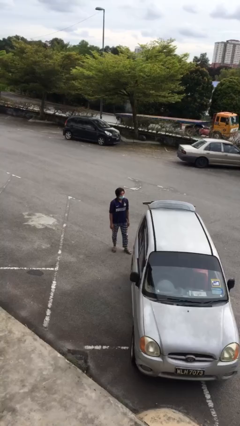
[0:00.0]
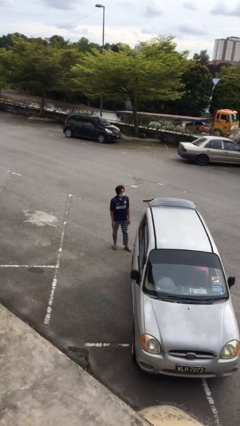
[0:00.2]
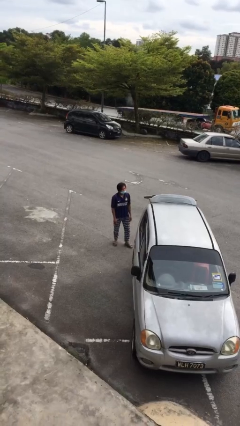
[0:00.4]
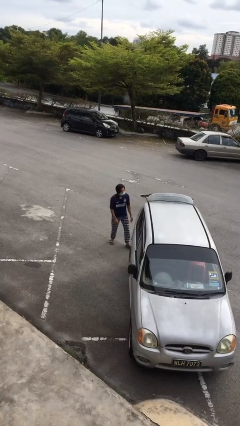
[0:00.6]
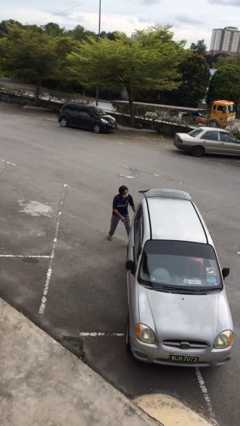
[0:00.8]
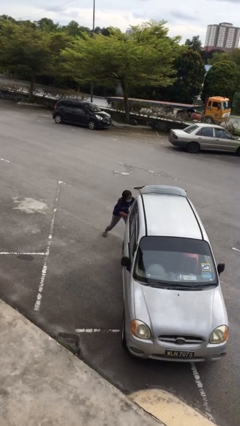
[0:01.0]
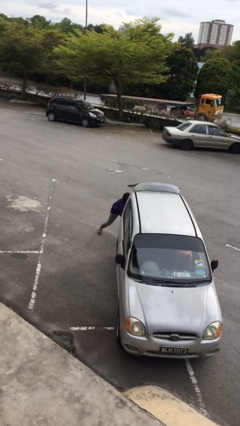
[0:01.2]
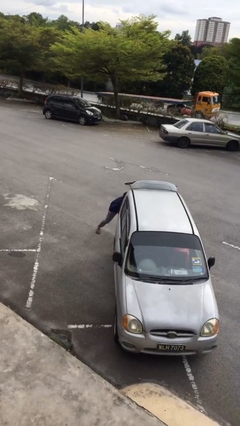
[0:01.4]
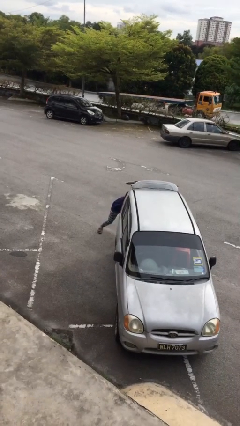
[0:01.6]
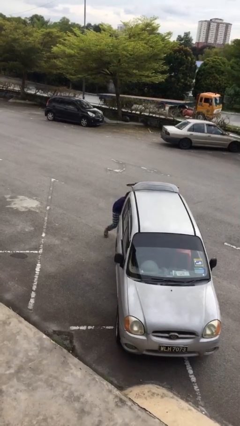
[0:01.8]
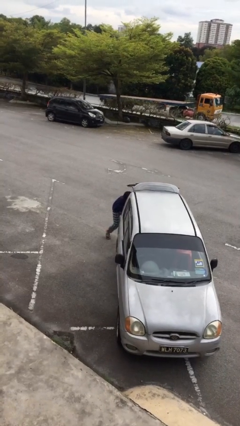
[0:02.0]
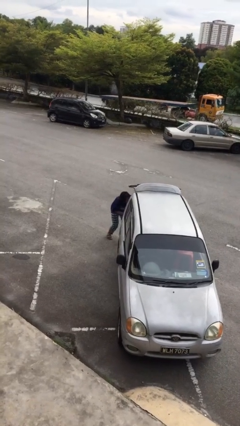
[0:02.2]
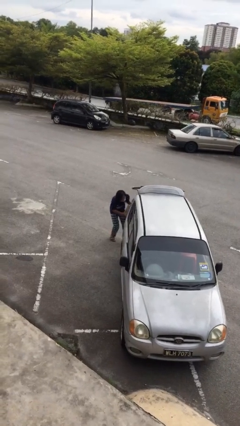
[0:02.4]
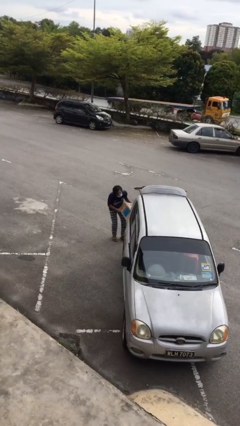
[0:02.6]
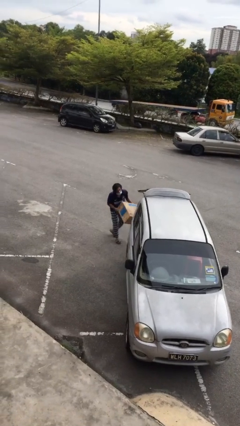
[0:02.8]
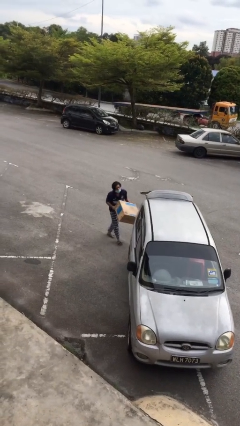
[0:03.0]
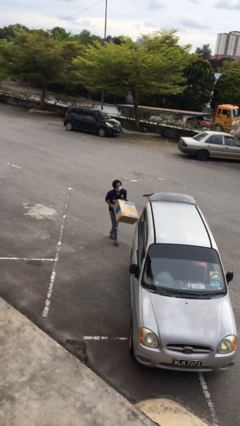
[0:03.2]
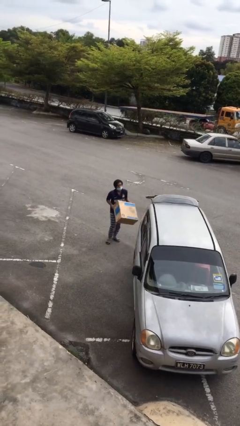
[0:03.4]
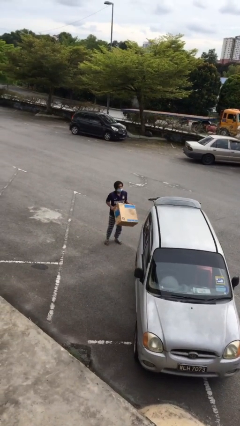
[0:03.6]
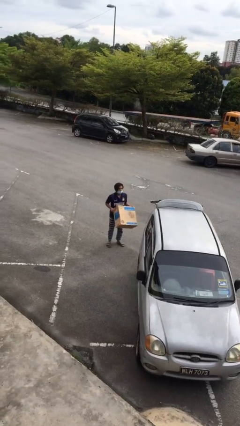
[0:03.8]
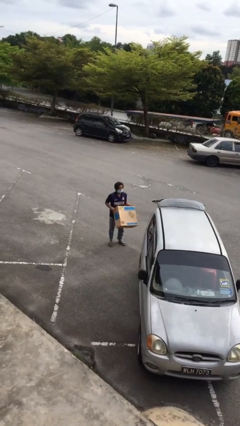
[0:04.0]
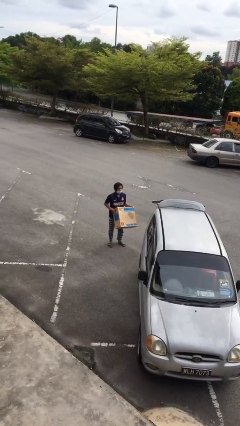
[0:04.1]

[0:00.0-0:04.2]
person unloads car

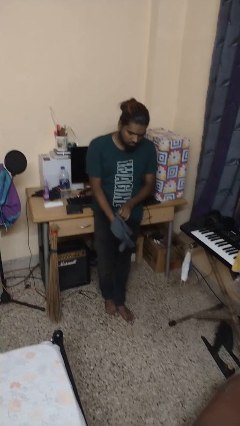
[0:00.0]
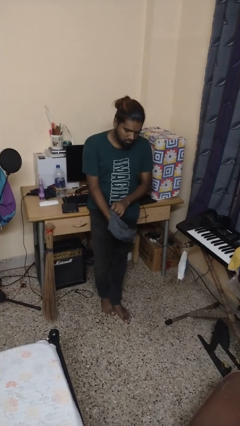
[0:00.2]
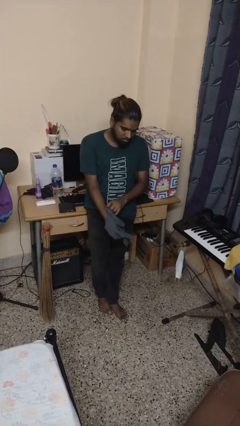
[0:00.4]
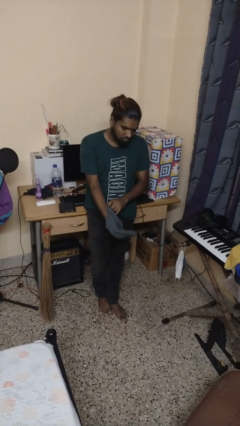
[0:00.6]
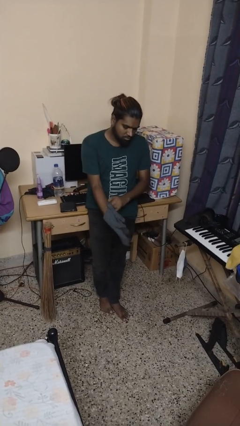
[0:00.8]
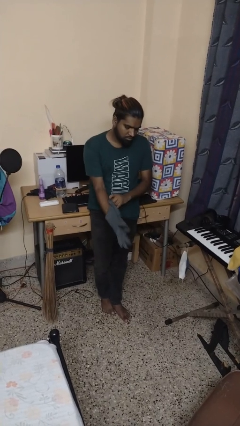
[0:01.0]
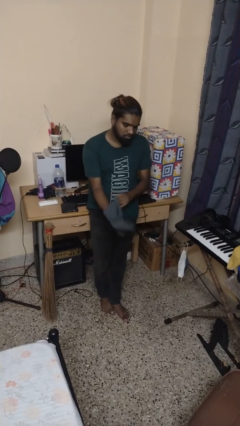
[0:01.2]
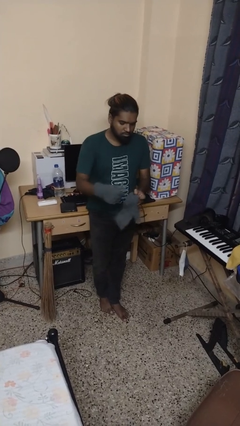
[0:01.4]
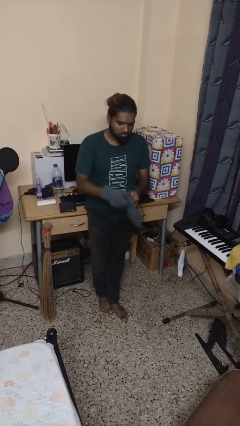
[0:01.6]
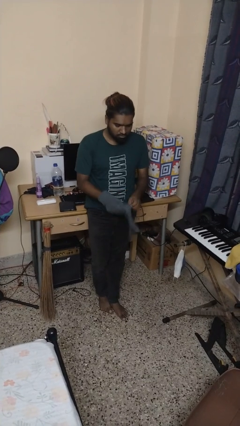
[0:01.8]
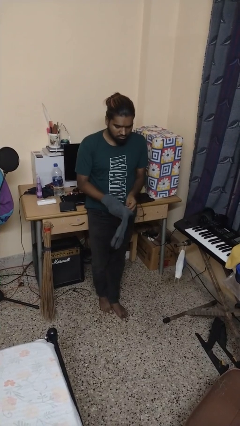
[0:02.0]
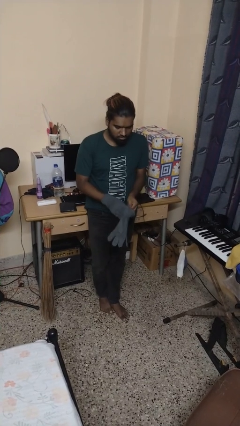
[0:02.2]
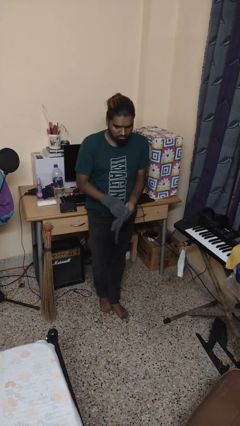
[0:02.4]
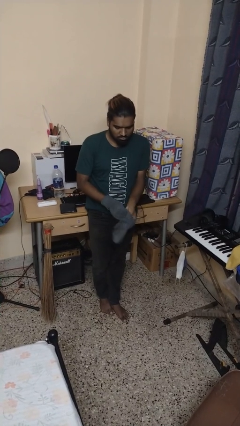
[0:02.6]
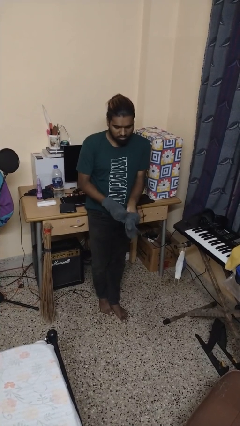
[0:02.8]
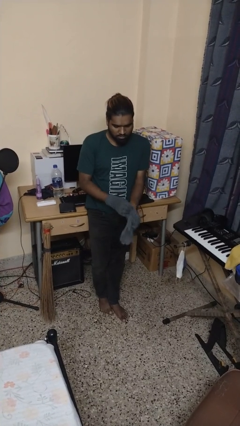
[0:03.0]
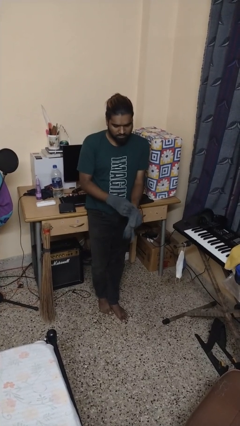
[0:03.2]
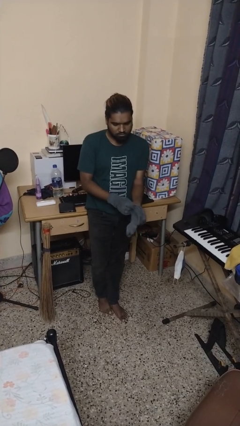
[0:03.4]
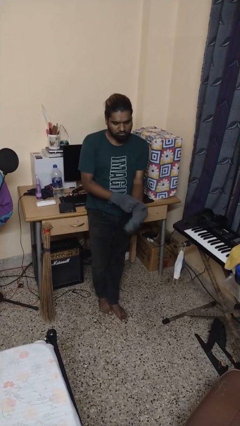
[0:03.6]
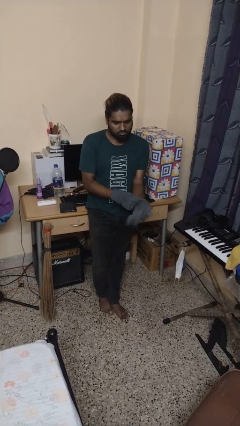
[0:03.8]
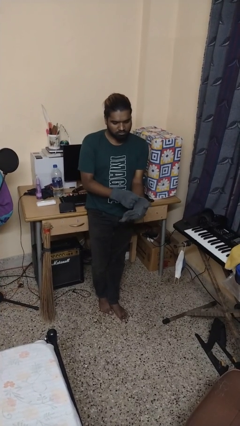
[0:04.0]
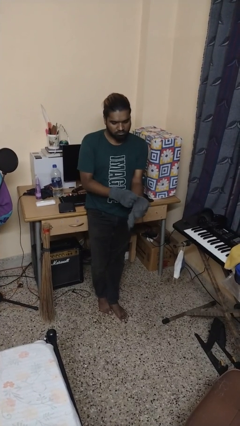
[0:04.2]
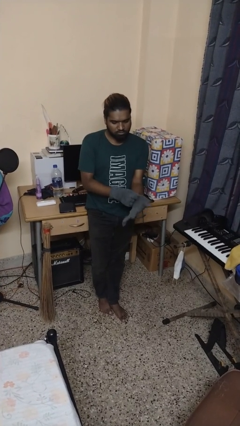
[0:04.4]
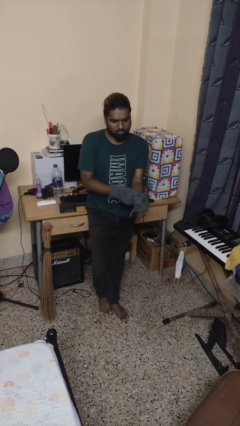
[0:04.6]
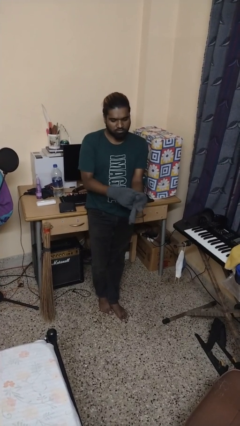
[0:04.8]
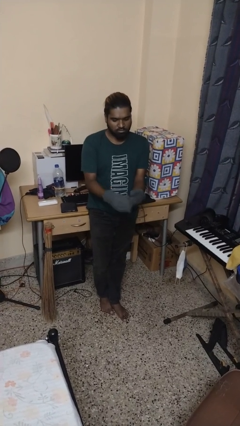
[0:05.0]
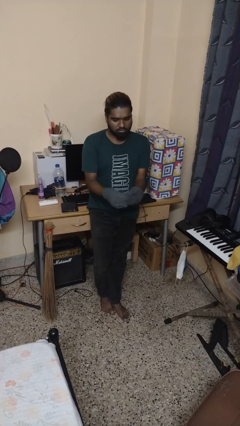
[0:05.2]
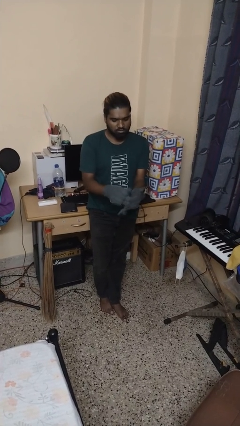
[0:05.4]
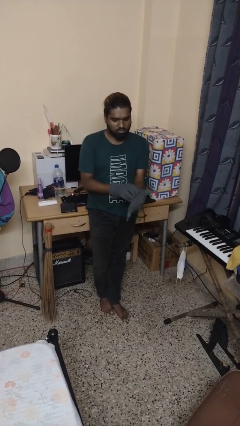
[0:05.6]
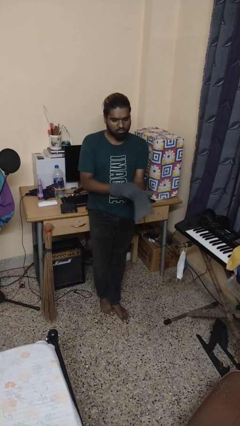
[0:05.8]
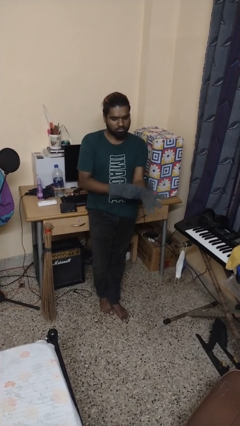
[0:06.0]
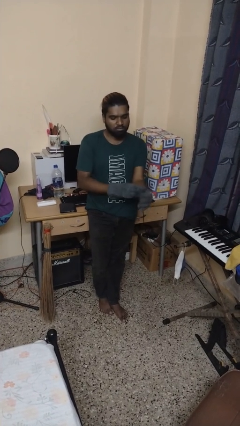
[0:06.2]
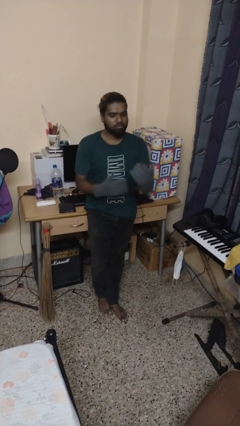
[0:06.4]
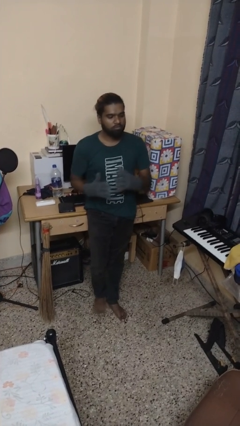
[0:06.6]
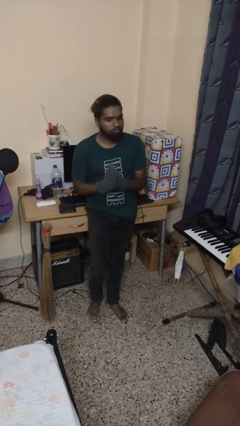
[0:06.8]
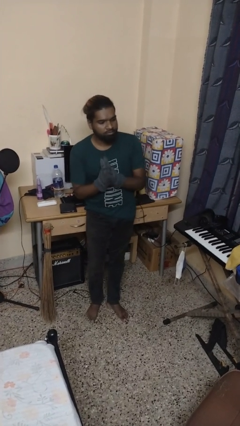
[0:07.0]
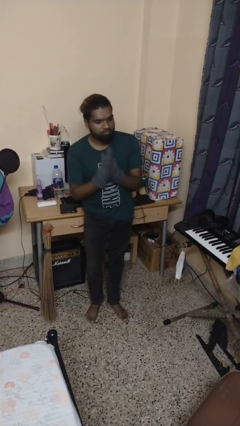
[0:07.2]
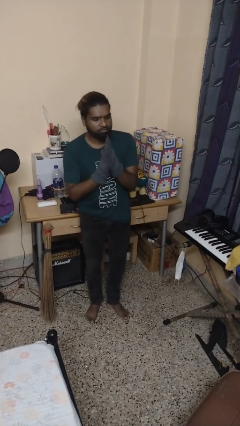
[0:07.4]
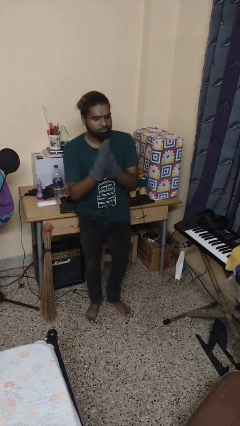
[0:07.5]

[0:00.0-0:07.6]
person puts on gloves

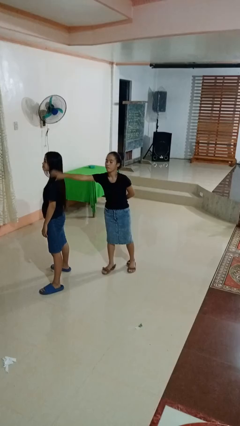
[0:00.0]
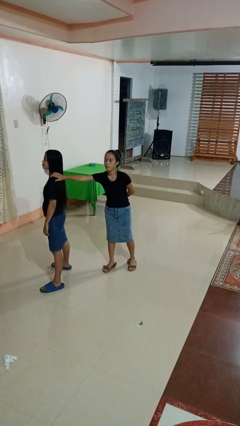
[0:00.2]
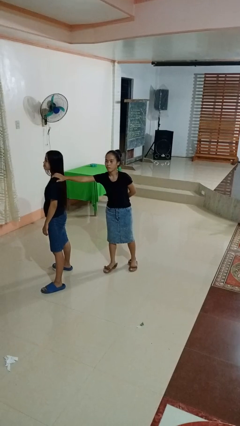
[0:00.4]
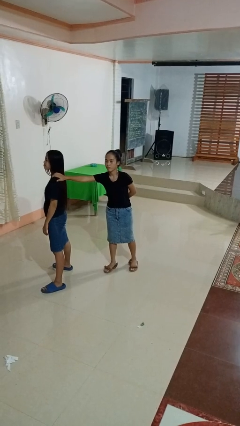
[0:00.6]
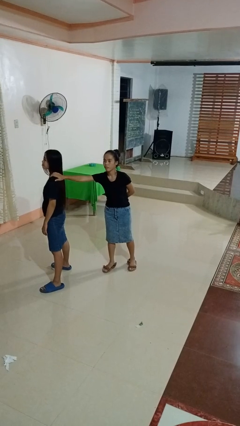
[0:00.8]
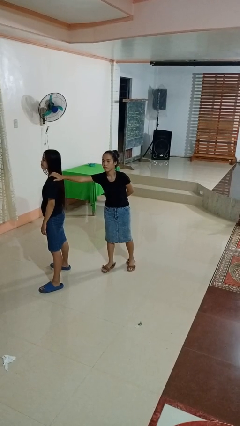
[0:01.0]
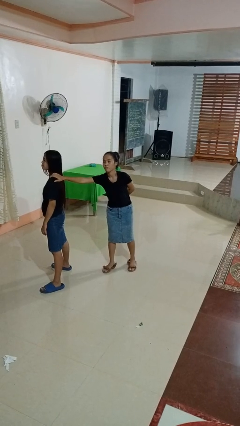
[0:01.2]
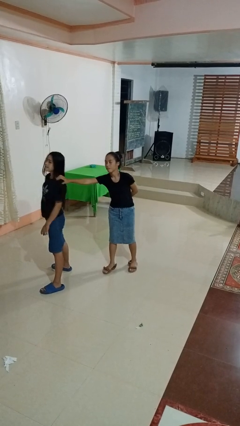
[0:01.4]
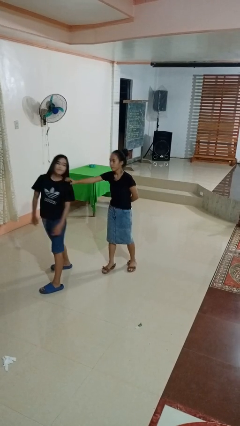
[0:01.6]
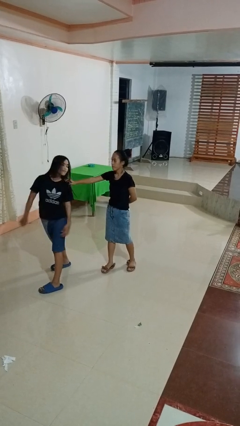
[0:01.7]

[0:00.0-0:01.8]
person grabs person by shoulder

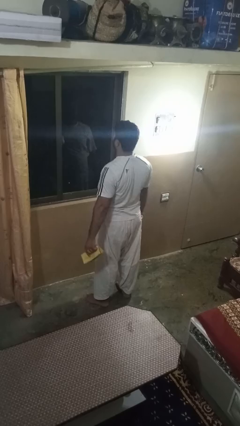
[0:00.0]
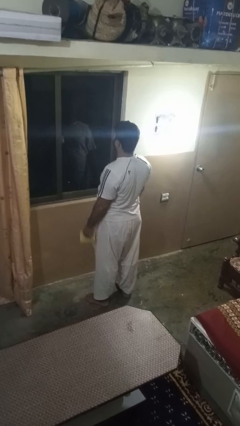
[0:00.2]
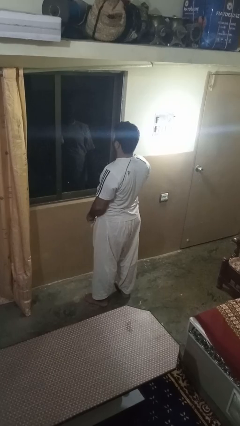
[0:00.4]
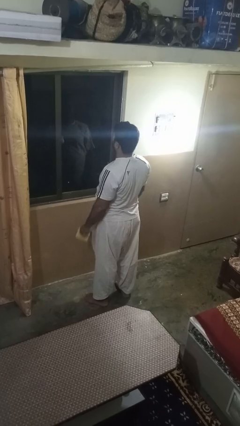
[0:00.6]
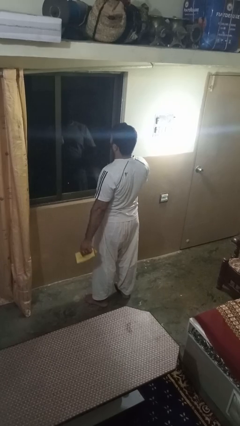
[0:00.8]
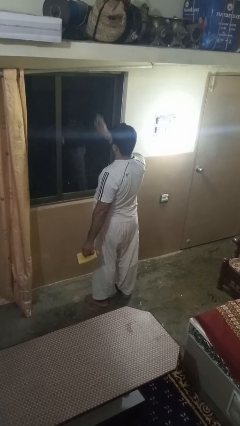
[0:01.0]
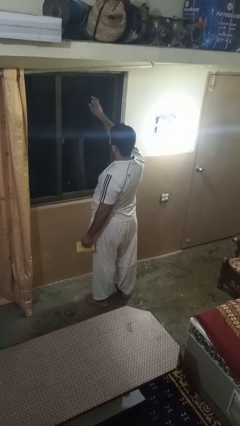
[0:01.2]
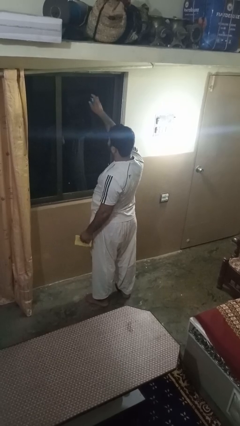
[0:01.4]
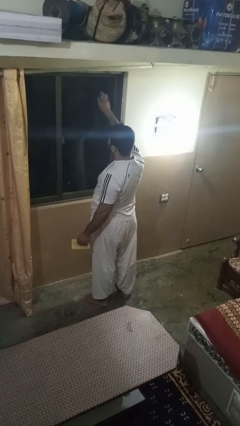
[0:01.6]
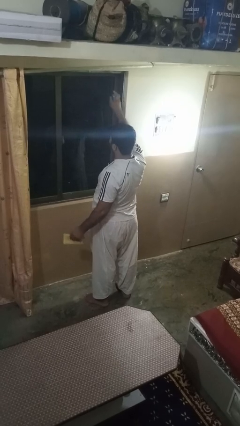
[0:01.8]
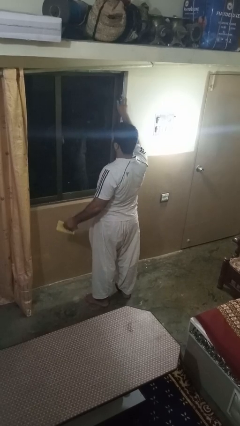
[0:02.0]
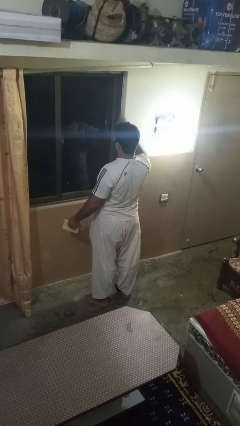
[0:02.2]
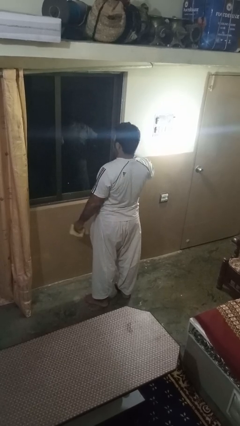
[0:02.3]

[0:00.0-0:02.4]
person sprays from bottle

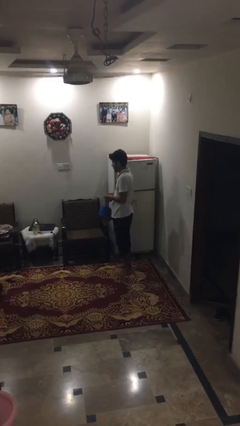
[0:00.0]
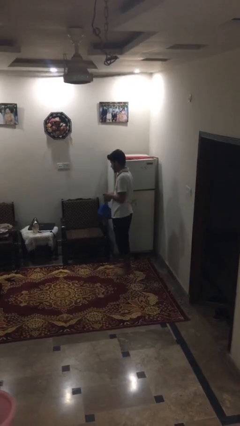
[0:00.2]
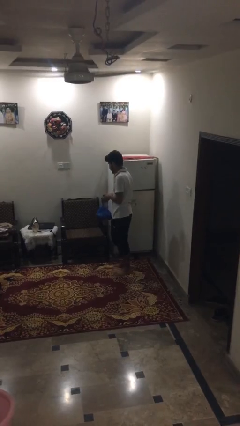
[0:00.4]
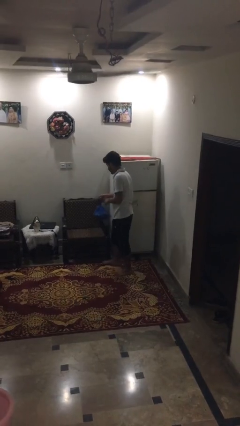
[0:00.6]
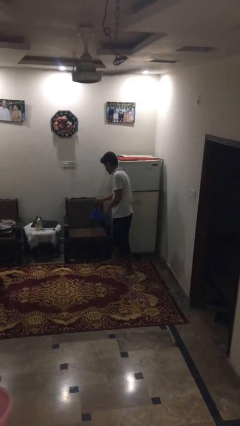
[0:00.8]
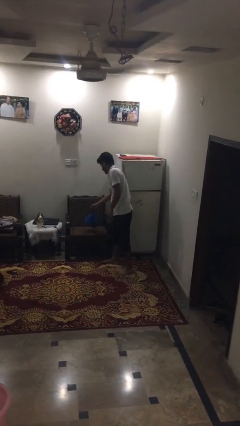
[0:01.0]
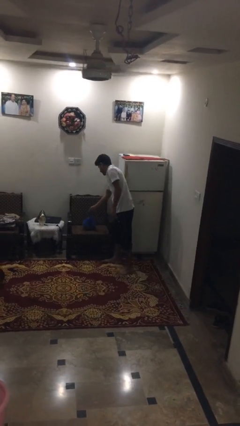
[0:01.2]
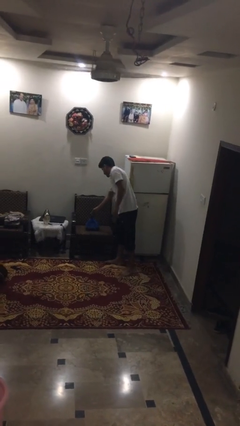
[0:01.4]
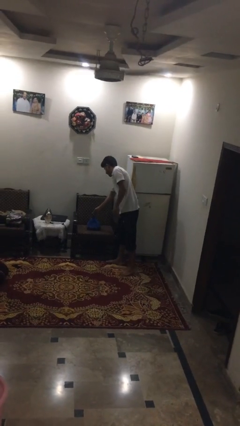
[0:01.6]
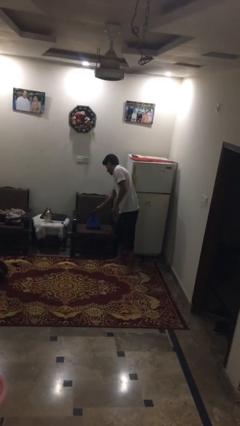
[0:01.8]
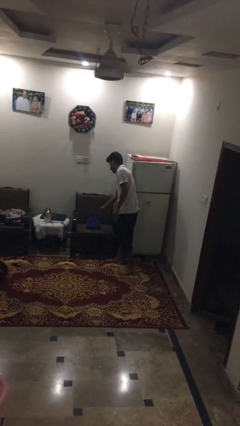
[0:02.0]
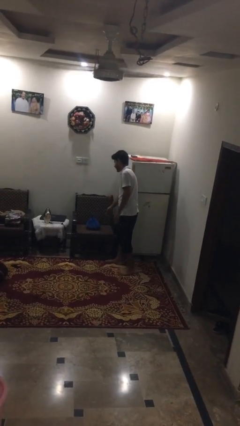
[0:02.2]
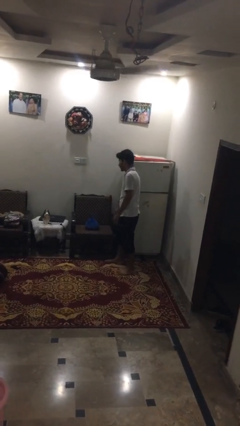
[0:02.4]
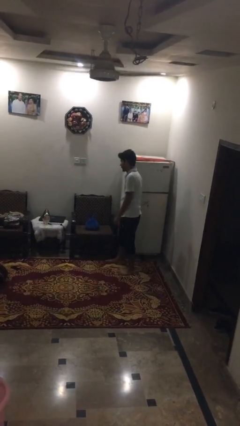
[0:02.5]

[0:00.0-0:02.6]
person puts down object on couch
